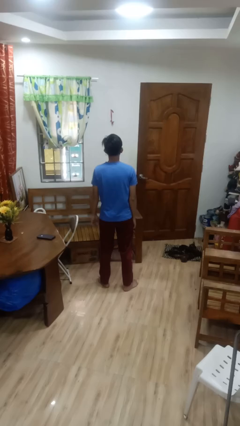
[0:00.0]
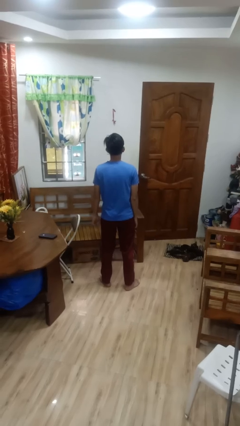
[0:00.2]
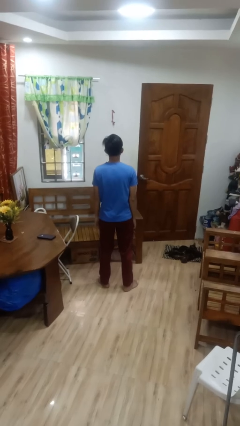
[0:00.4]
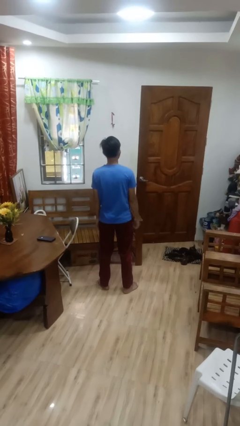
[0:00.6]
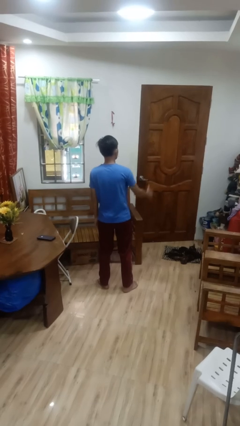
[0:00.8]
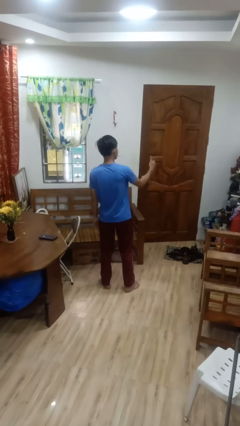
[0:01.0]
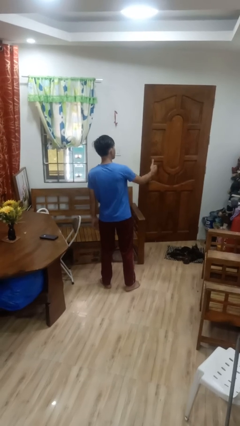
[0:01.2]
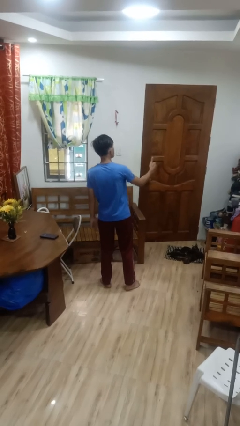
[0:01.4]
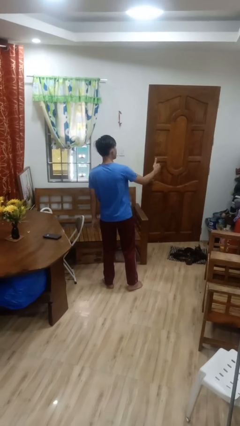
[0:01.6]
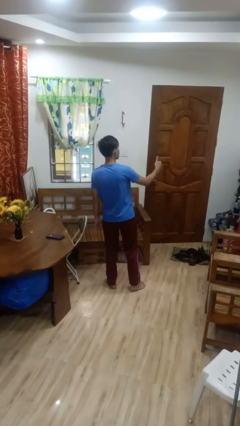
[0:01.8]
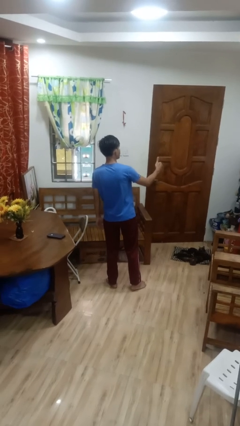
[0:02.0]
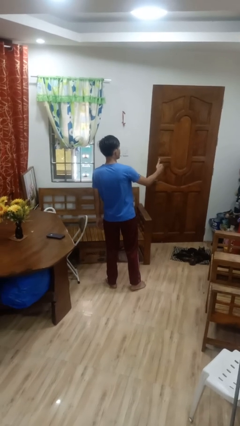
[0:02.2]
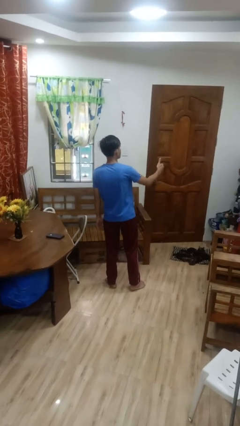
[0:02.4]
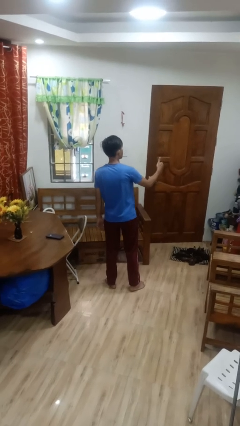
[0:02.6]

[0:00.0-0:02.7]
person gestures thumbs up

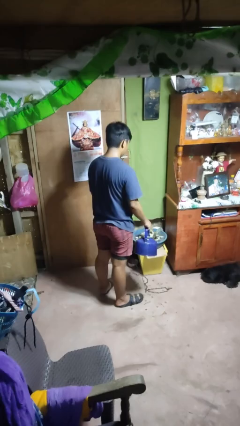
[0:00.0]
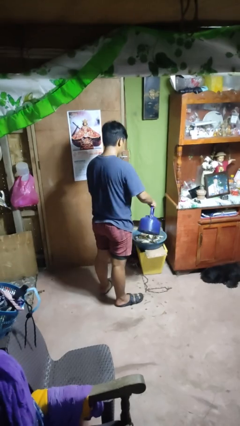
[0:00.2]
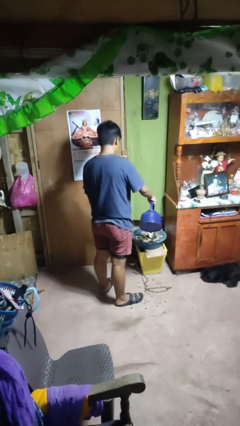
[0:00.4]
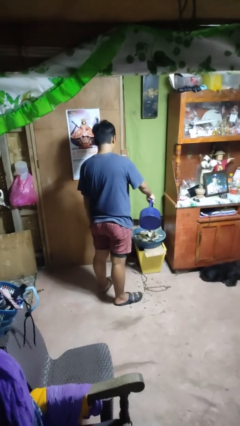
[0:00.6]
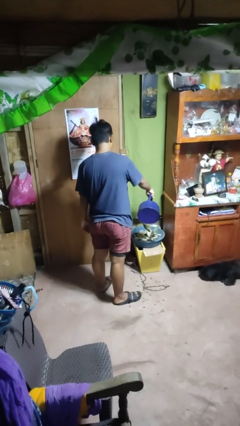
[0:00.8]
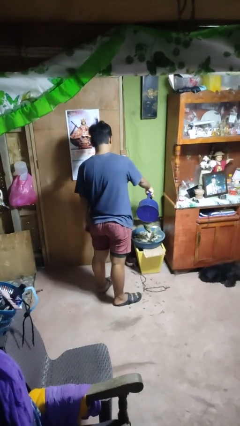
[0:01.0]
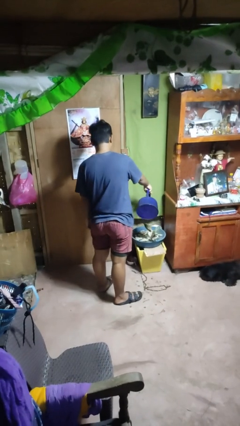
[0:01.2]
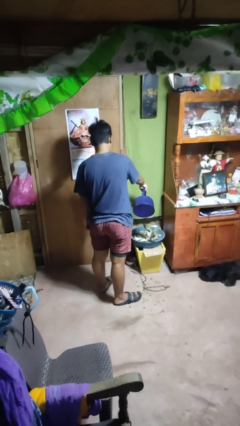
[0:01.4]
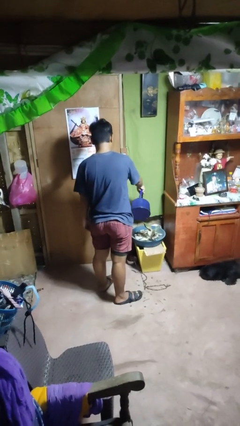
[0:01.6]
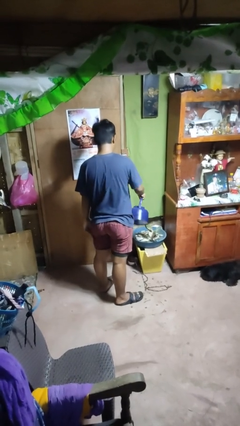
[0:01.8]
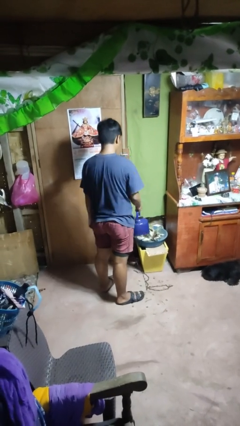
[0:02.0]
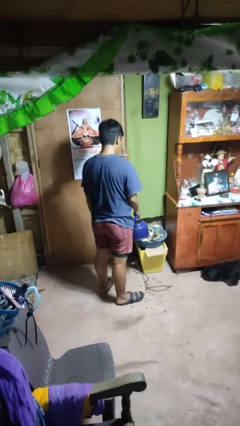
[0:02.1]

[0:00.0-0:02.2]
person waters houseplant

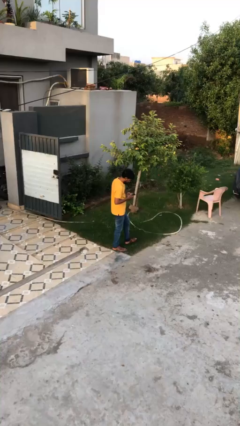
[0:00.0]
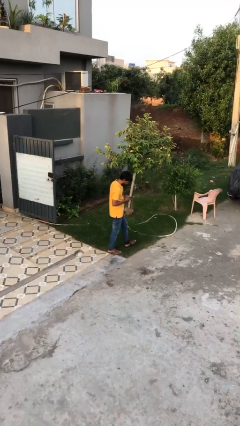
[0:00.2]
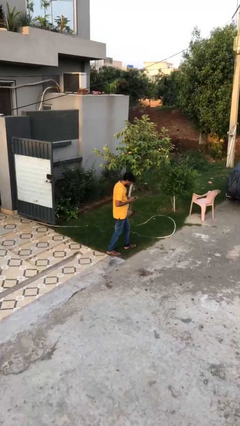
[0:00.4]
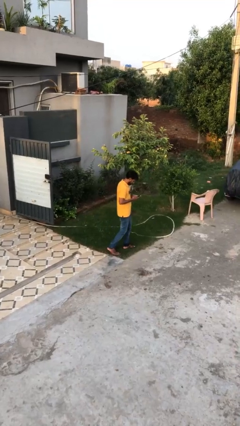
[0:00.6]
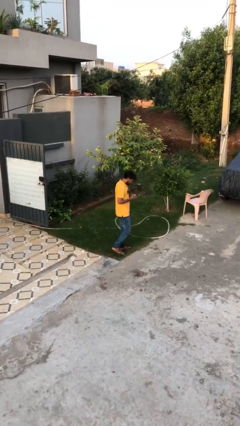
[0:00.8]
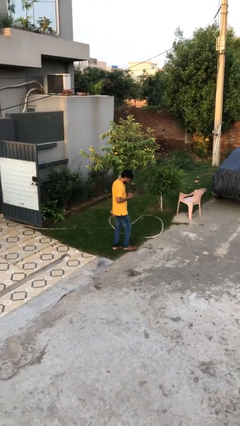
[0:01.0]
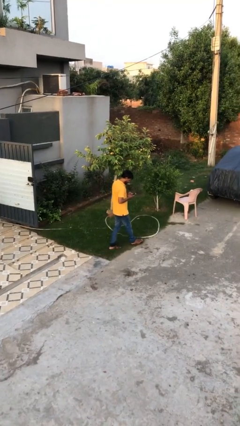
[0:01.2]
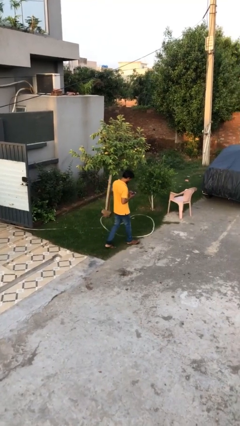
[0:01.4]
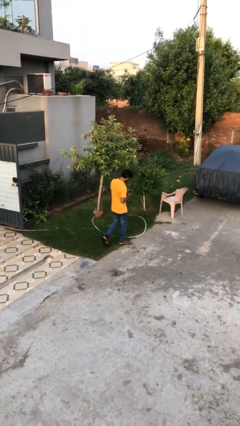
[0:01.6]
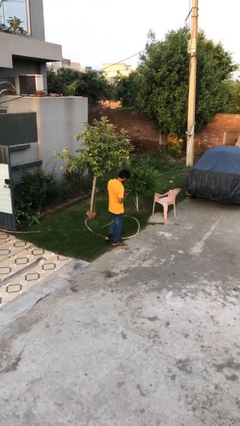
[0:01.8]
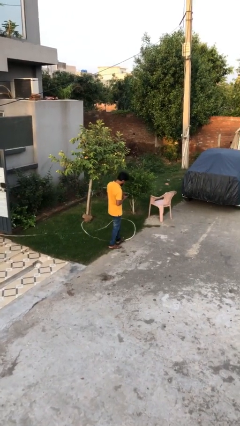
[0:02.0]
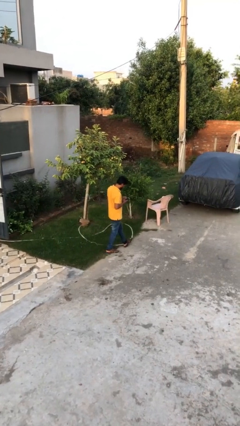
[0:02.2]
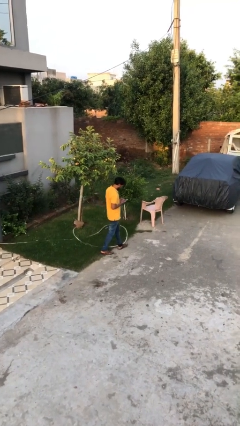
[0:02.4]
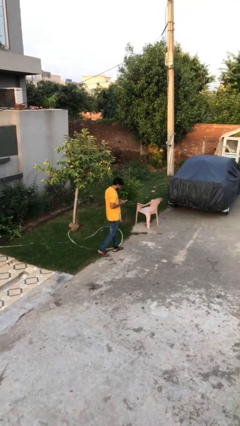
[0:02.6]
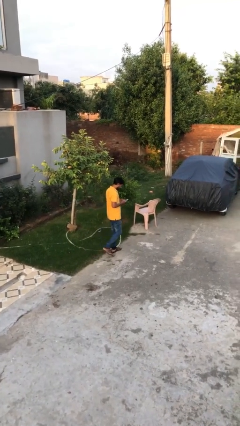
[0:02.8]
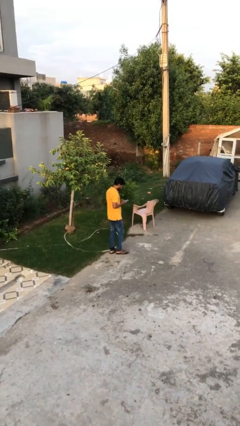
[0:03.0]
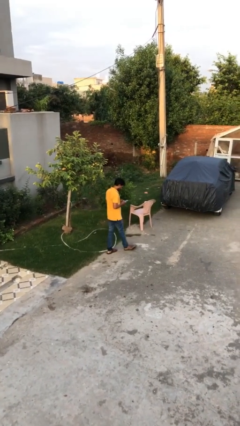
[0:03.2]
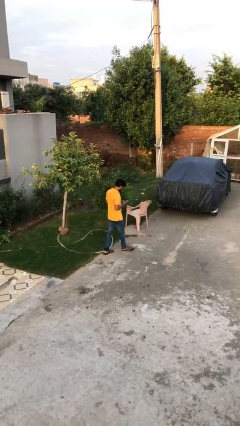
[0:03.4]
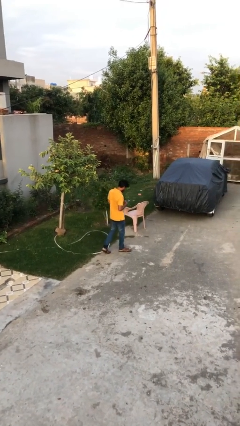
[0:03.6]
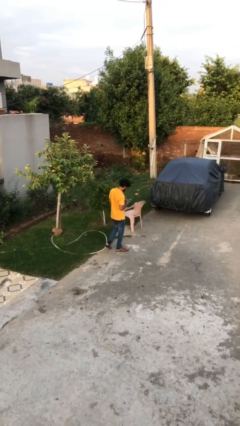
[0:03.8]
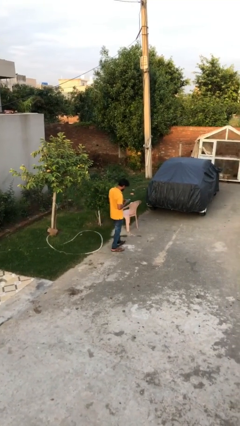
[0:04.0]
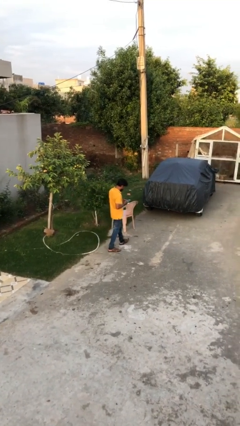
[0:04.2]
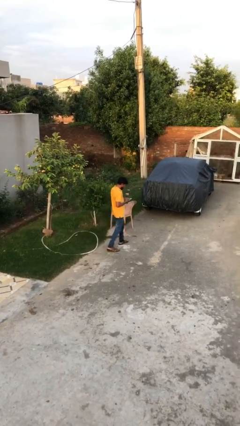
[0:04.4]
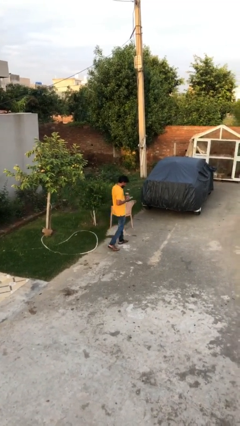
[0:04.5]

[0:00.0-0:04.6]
person texts on phone

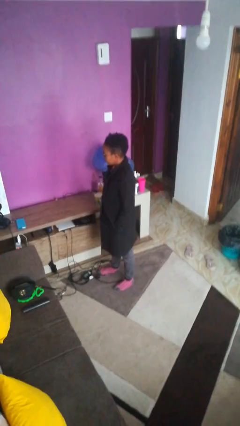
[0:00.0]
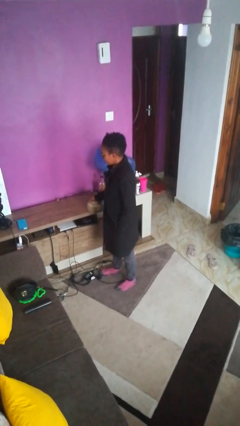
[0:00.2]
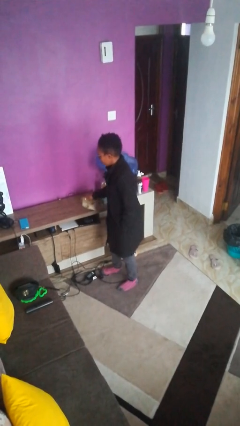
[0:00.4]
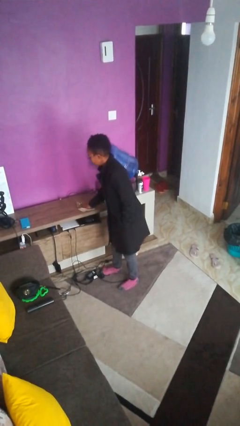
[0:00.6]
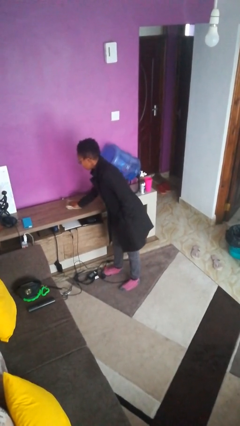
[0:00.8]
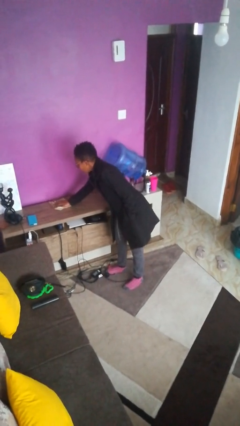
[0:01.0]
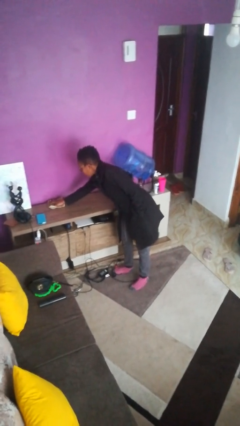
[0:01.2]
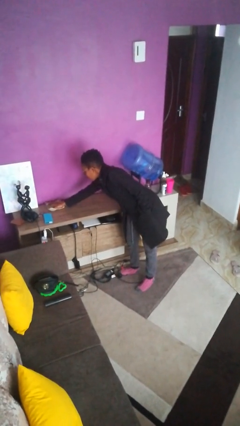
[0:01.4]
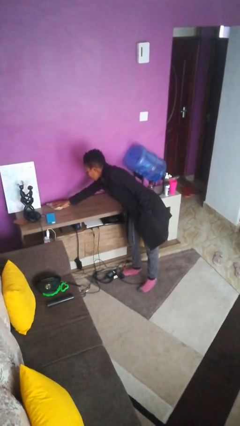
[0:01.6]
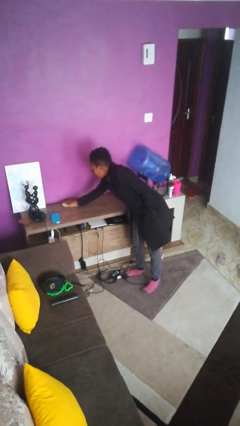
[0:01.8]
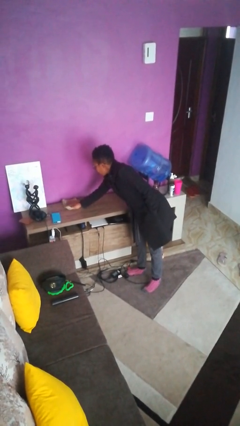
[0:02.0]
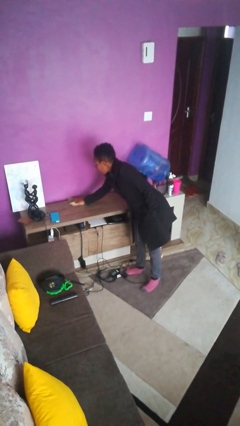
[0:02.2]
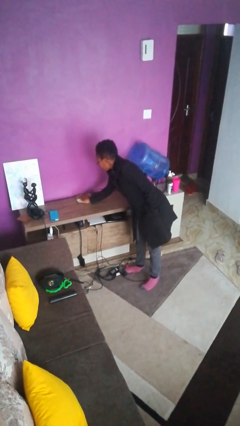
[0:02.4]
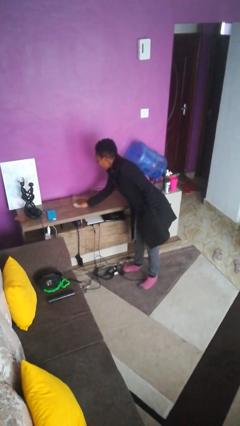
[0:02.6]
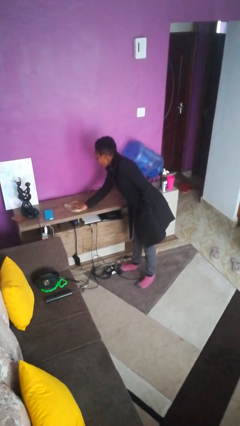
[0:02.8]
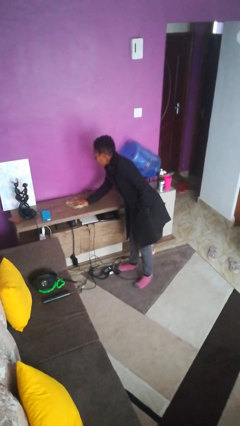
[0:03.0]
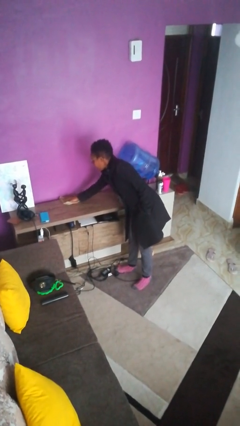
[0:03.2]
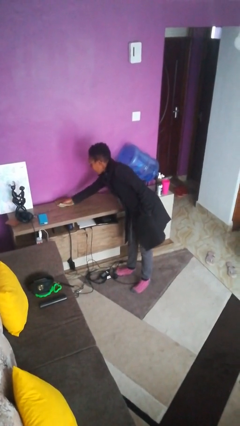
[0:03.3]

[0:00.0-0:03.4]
person cleans table with rag

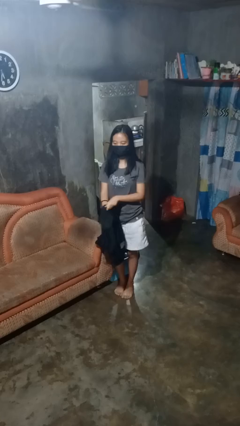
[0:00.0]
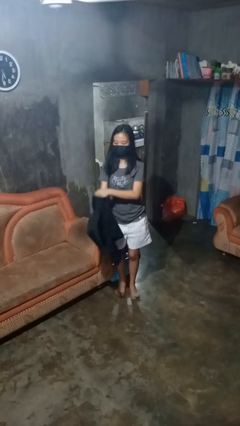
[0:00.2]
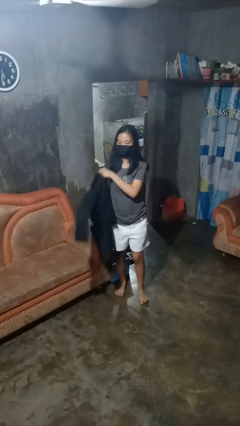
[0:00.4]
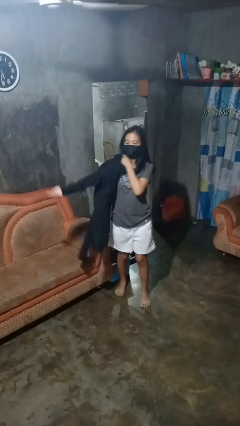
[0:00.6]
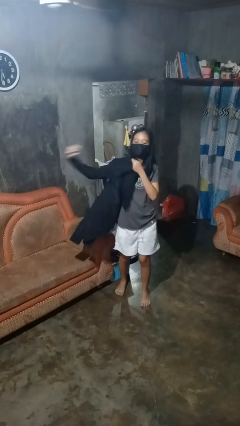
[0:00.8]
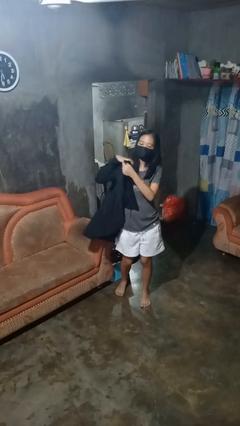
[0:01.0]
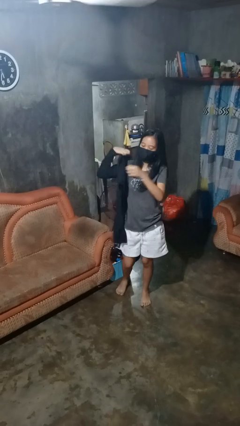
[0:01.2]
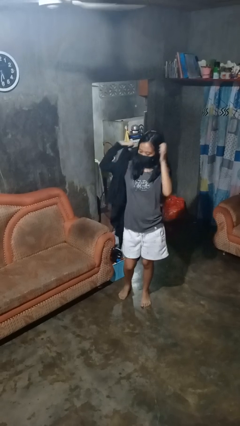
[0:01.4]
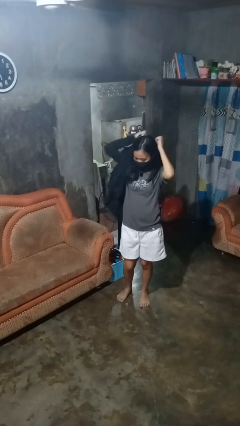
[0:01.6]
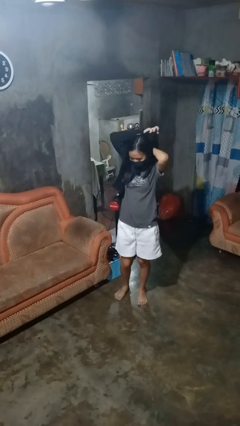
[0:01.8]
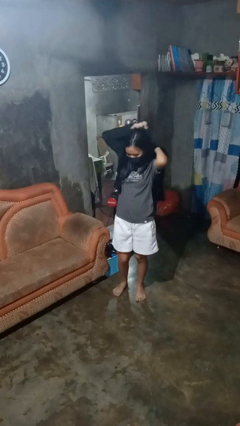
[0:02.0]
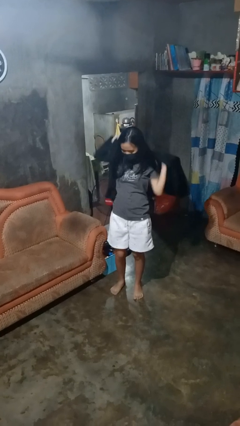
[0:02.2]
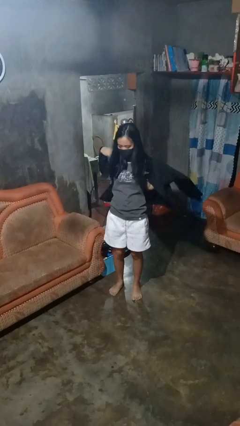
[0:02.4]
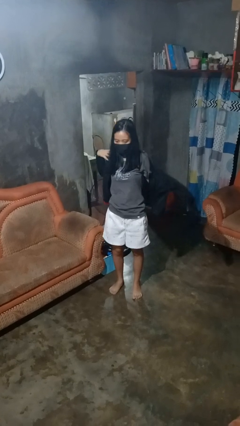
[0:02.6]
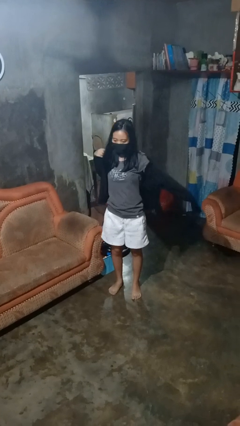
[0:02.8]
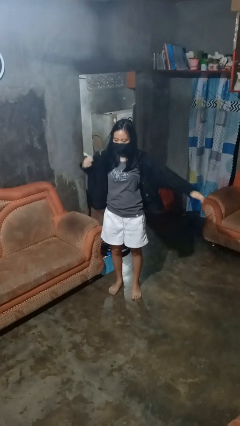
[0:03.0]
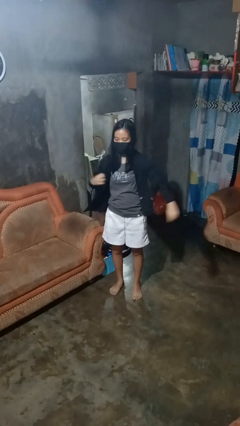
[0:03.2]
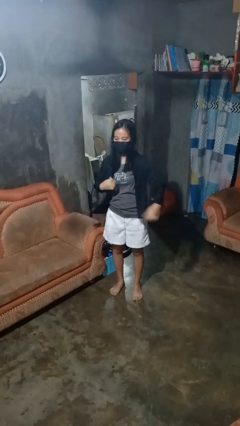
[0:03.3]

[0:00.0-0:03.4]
person puts on shirt

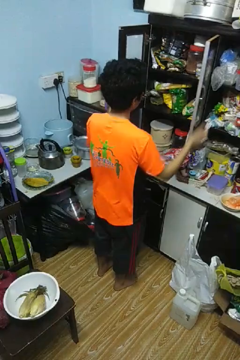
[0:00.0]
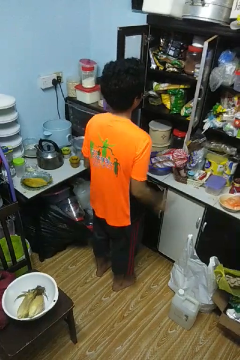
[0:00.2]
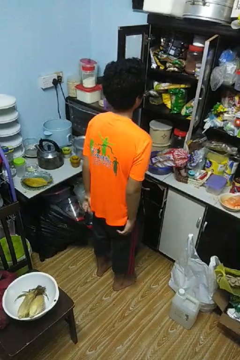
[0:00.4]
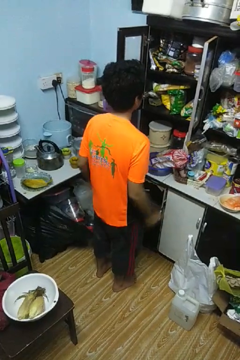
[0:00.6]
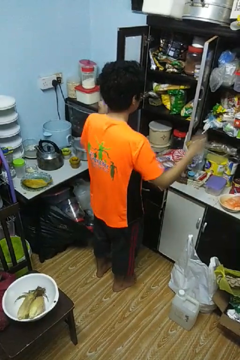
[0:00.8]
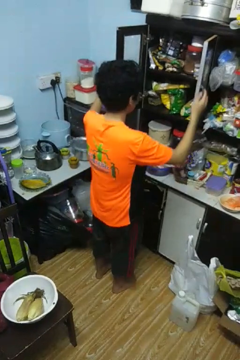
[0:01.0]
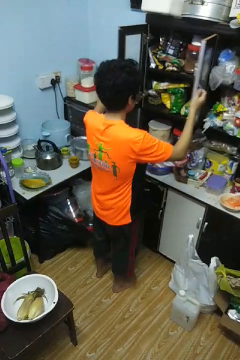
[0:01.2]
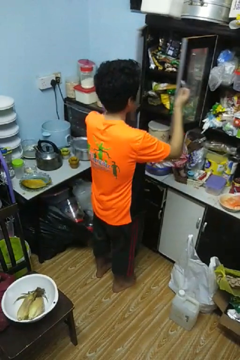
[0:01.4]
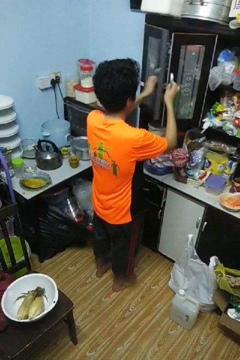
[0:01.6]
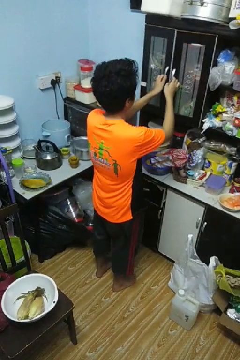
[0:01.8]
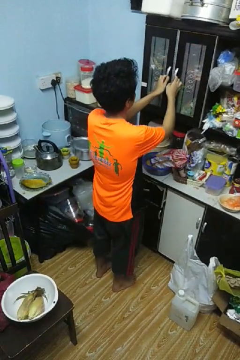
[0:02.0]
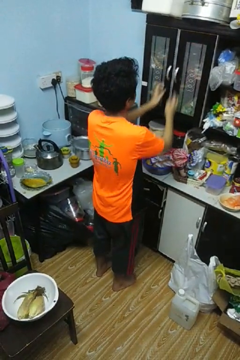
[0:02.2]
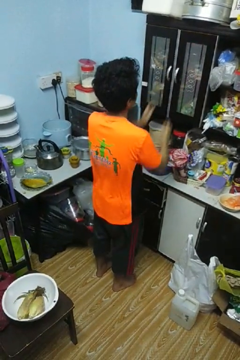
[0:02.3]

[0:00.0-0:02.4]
person closes cabinet
